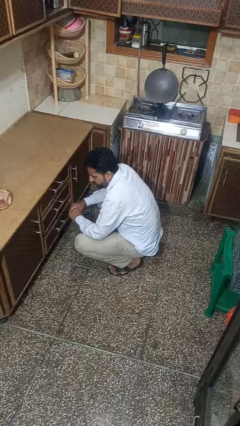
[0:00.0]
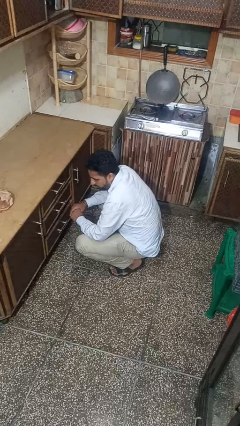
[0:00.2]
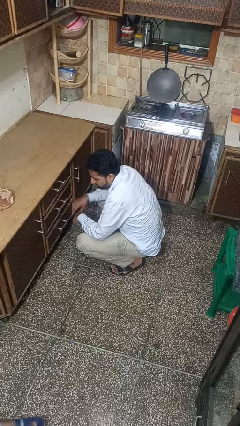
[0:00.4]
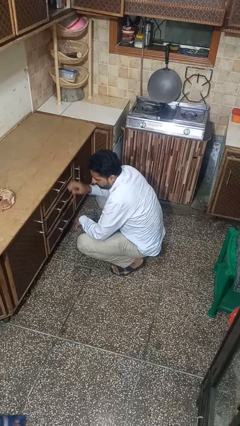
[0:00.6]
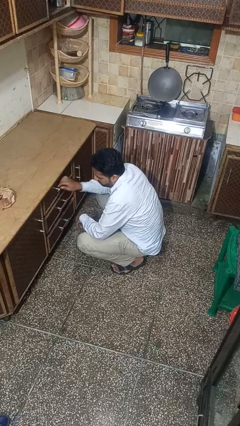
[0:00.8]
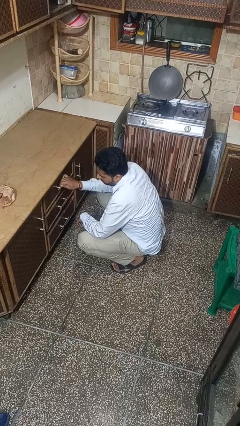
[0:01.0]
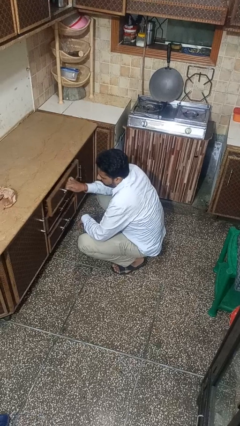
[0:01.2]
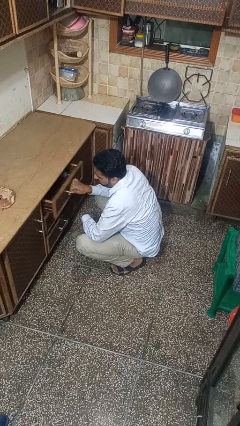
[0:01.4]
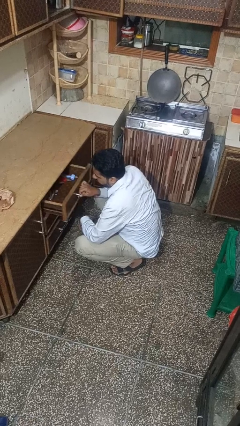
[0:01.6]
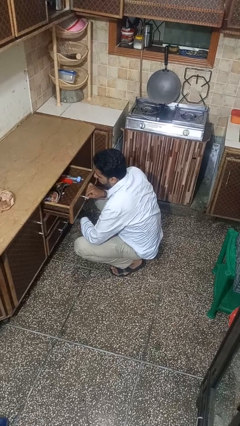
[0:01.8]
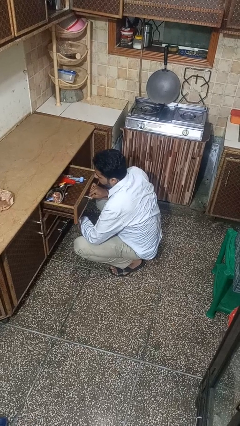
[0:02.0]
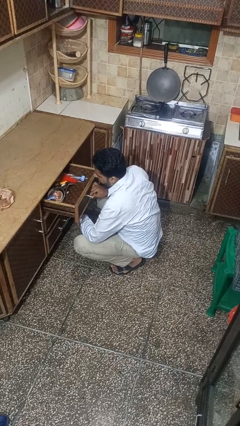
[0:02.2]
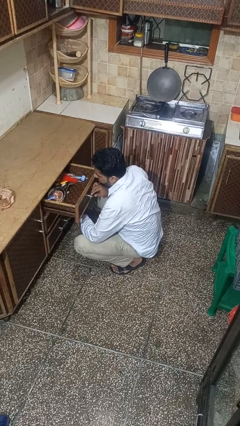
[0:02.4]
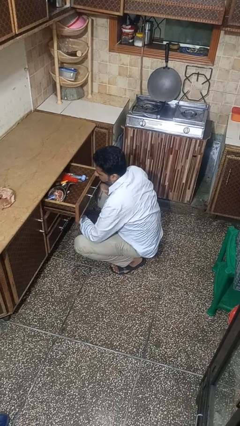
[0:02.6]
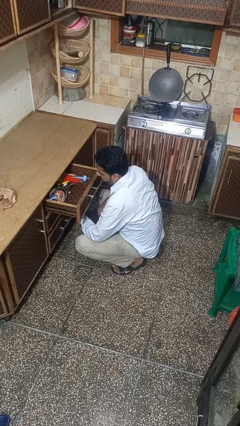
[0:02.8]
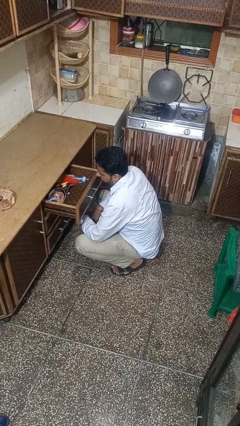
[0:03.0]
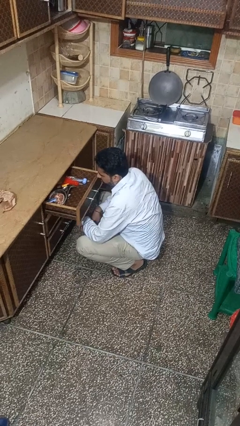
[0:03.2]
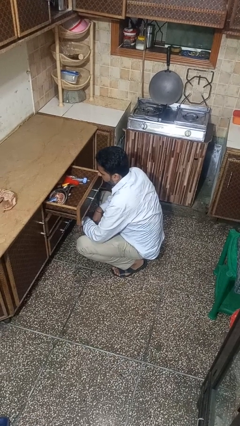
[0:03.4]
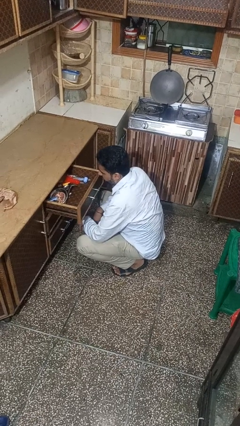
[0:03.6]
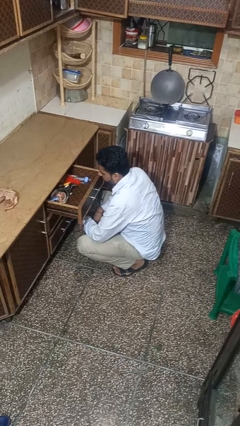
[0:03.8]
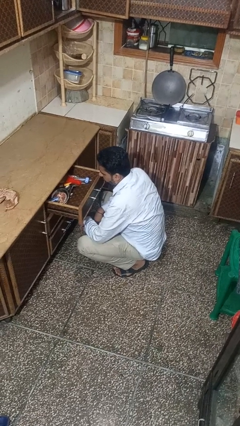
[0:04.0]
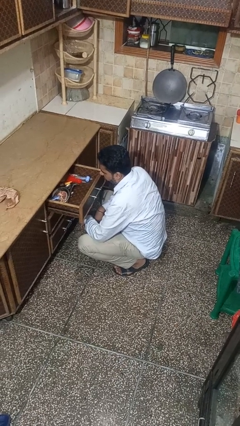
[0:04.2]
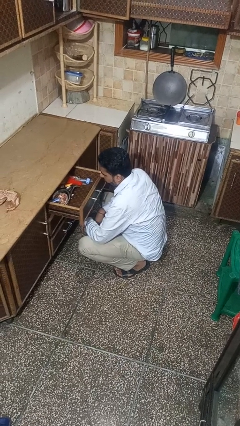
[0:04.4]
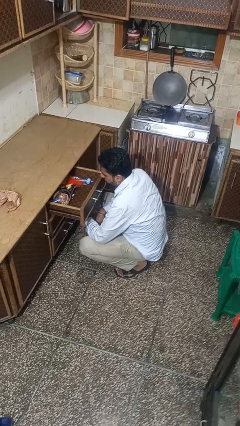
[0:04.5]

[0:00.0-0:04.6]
person opens kitchen drawer

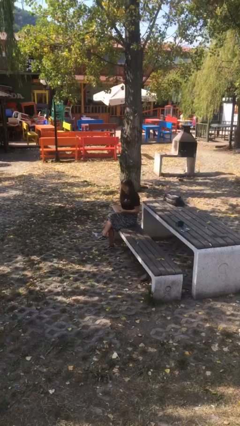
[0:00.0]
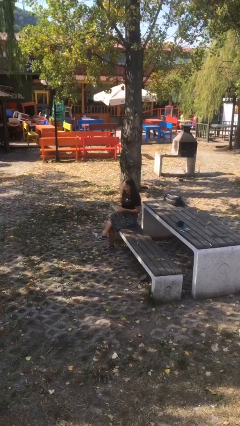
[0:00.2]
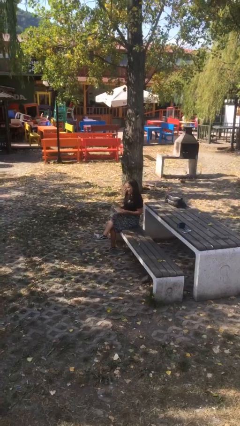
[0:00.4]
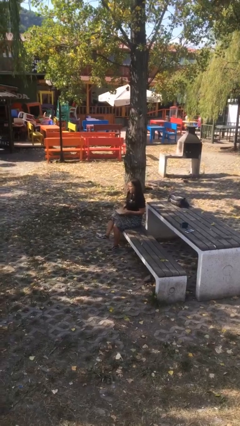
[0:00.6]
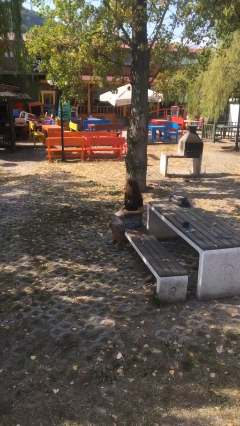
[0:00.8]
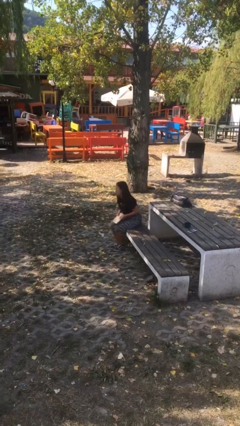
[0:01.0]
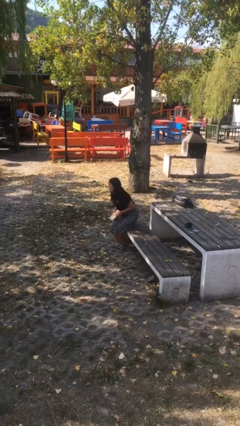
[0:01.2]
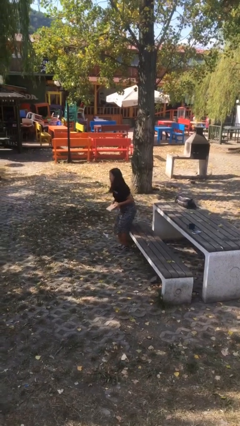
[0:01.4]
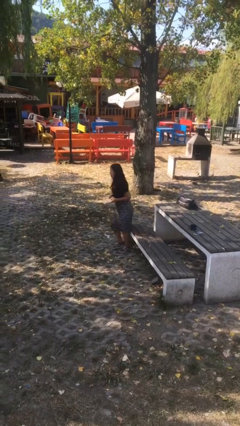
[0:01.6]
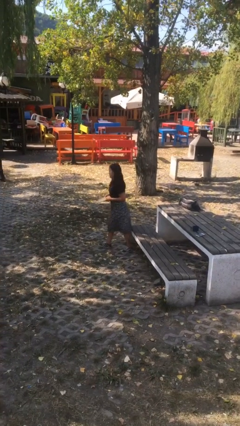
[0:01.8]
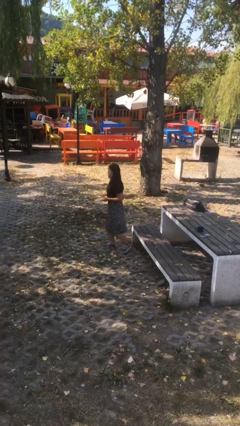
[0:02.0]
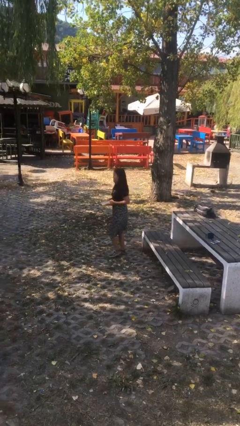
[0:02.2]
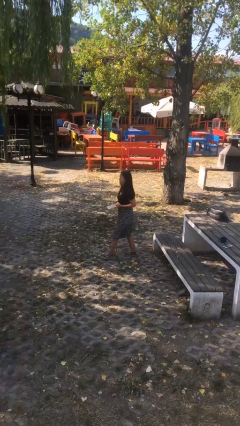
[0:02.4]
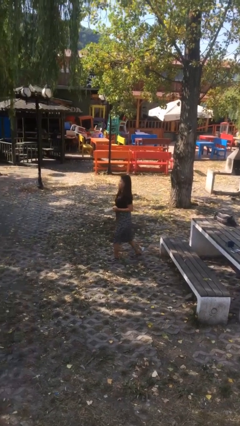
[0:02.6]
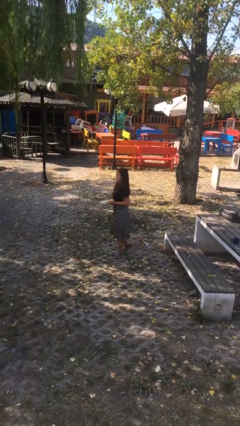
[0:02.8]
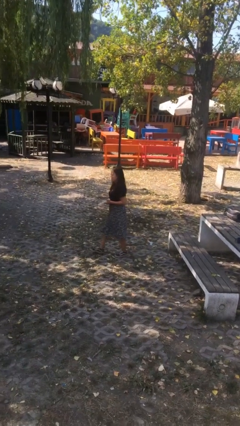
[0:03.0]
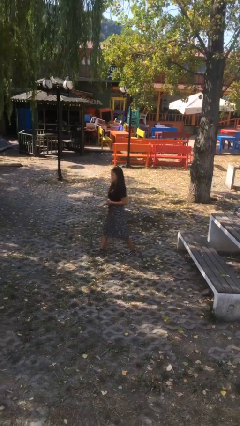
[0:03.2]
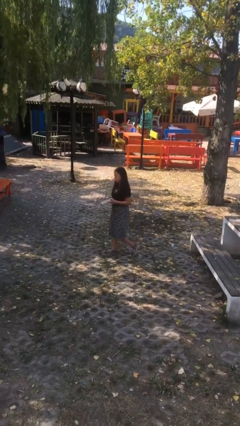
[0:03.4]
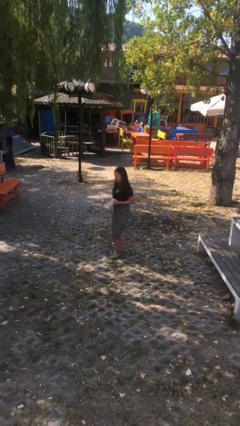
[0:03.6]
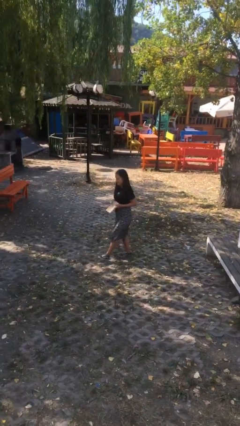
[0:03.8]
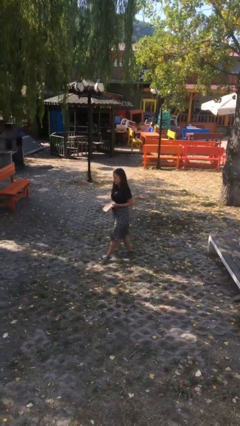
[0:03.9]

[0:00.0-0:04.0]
person stands up

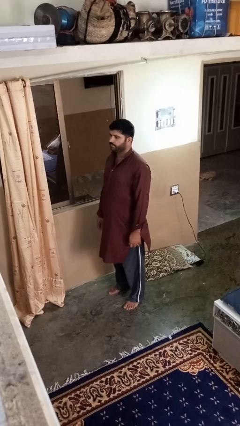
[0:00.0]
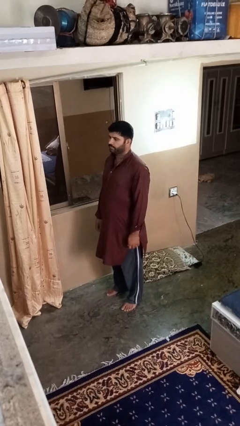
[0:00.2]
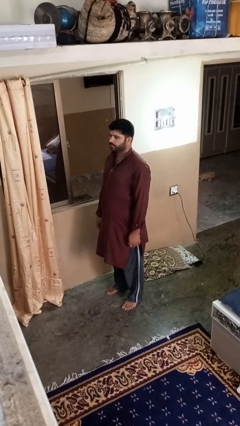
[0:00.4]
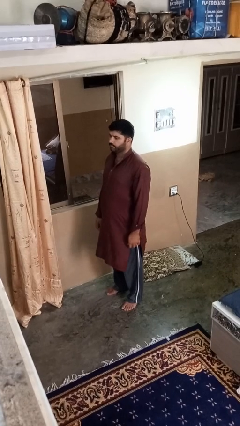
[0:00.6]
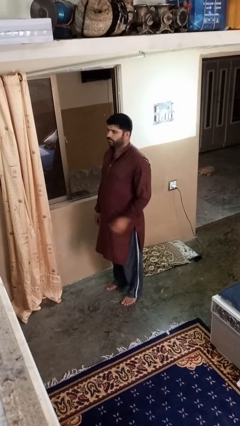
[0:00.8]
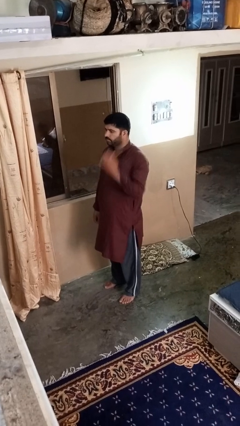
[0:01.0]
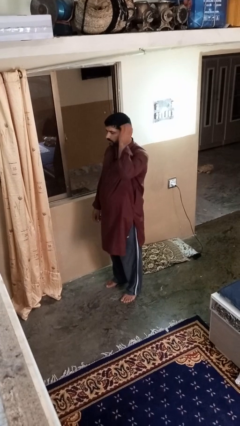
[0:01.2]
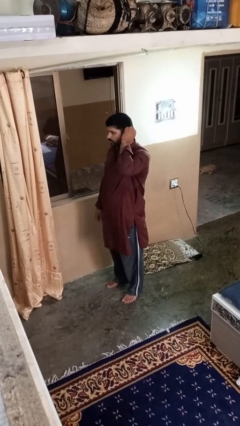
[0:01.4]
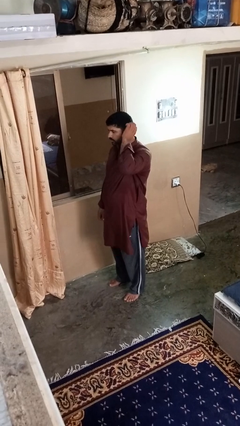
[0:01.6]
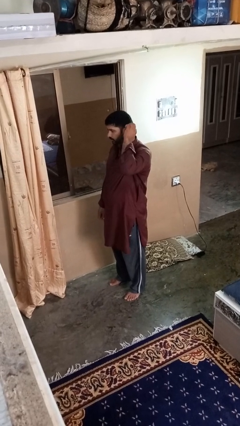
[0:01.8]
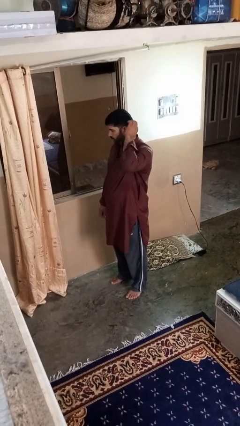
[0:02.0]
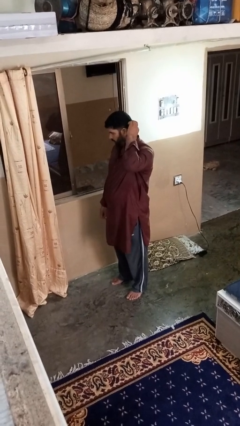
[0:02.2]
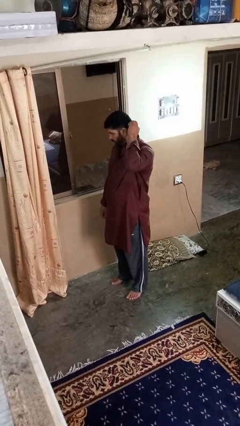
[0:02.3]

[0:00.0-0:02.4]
person strokes hair

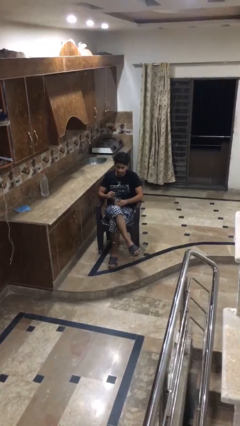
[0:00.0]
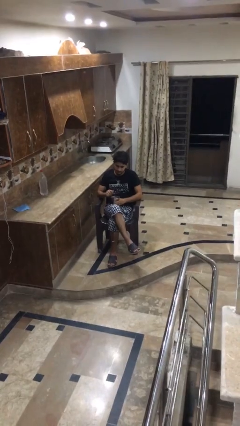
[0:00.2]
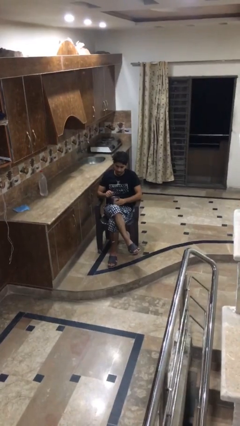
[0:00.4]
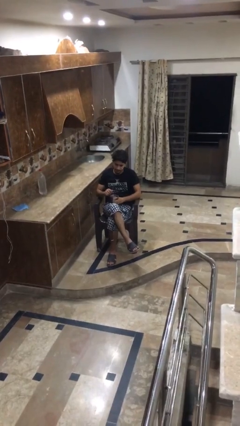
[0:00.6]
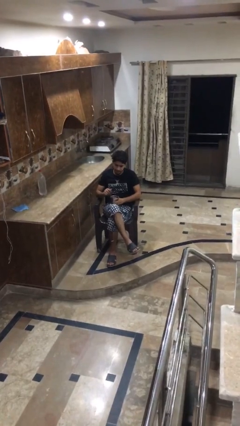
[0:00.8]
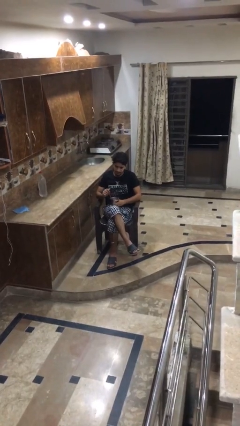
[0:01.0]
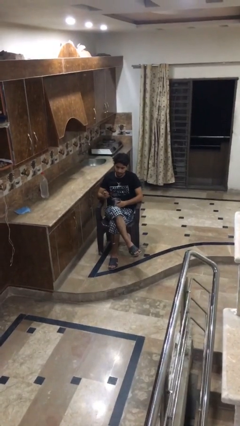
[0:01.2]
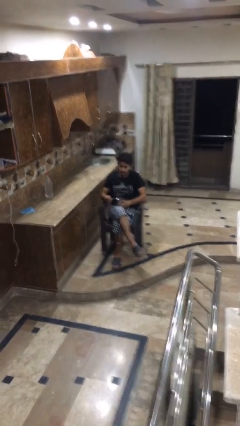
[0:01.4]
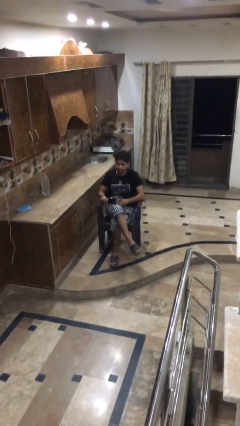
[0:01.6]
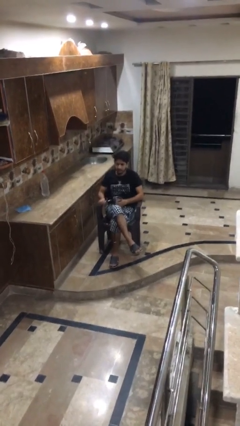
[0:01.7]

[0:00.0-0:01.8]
person stirs mug

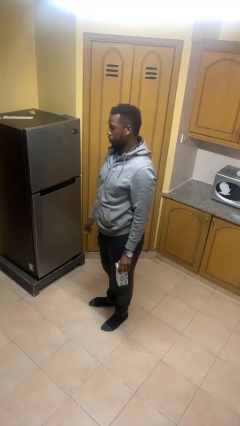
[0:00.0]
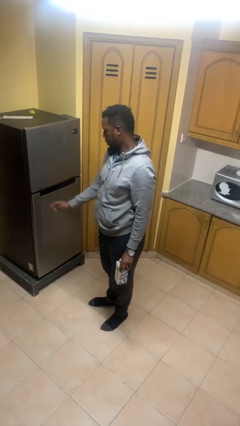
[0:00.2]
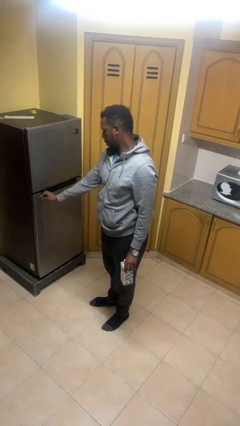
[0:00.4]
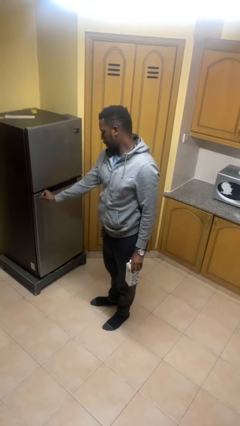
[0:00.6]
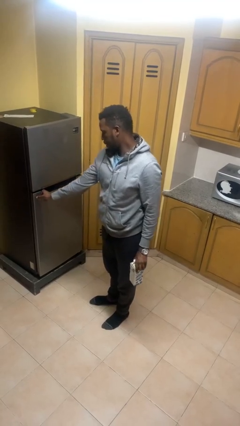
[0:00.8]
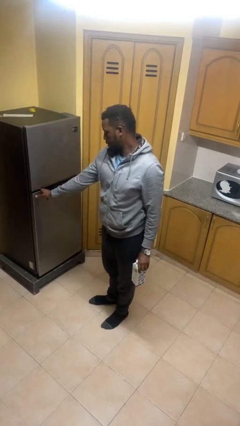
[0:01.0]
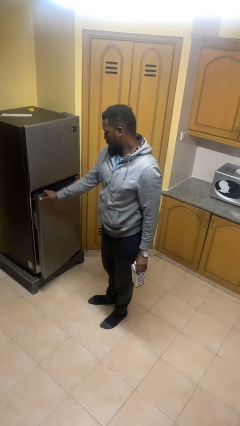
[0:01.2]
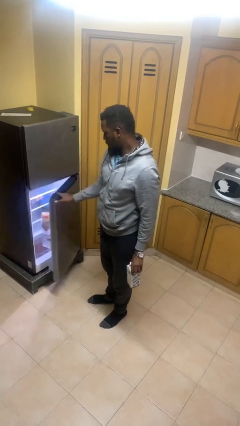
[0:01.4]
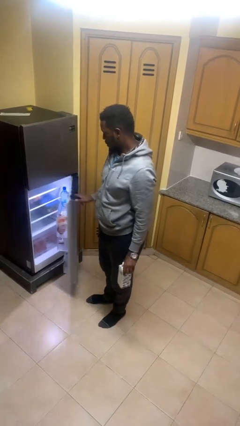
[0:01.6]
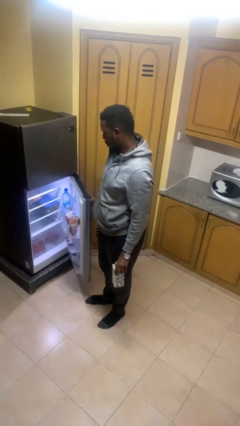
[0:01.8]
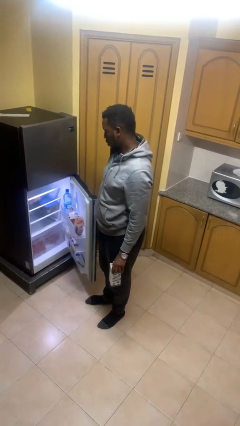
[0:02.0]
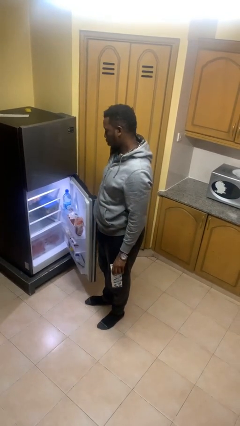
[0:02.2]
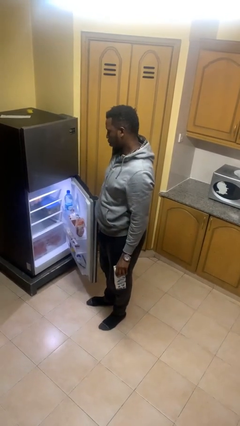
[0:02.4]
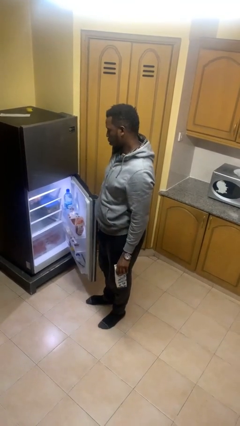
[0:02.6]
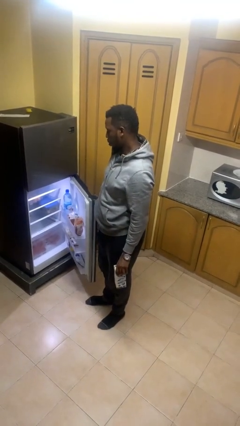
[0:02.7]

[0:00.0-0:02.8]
person opens refrigerator

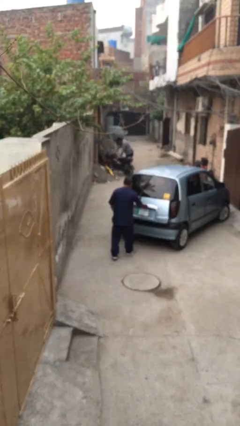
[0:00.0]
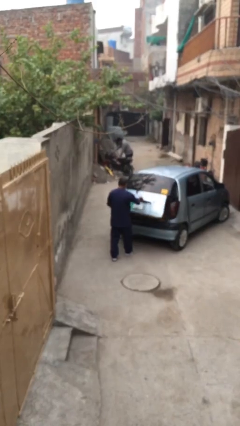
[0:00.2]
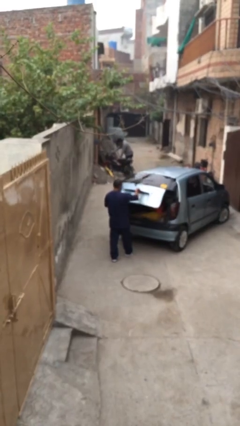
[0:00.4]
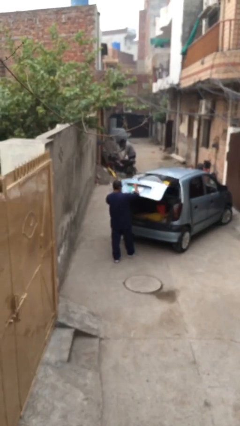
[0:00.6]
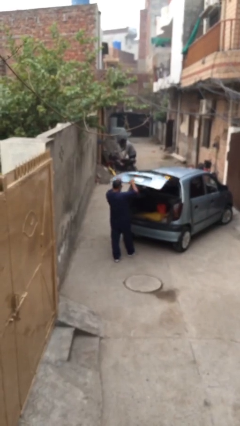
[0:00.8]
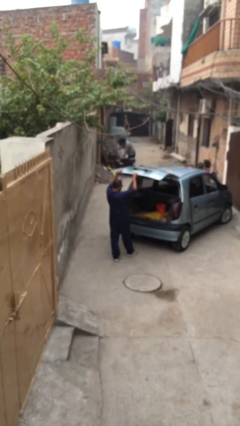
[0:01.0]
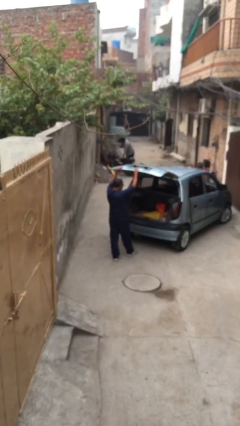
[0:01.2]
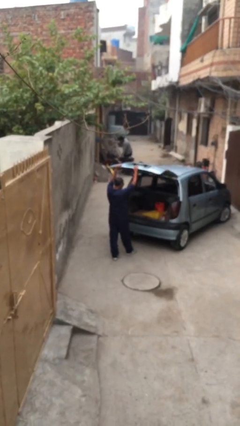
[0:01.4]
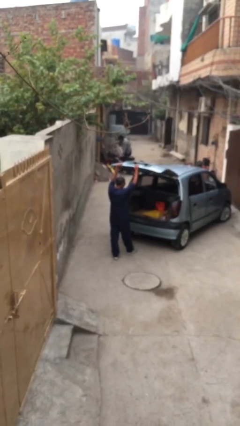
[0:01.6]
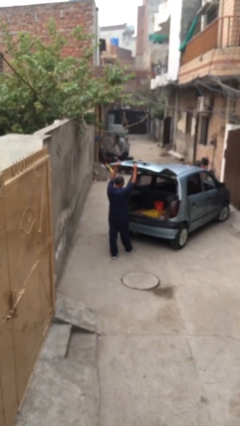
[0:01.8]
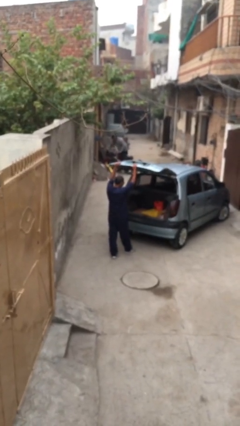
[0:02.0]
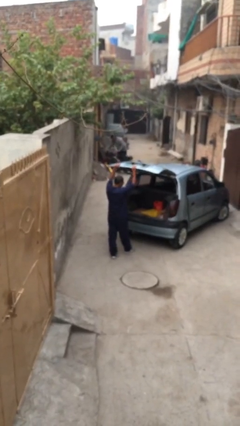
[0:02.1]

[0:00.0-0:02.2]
person opens car trunk
